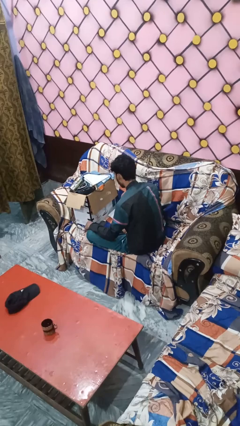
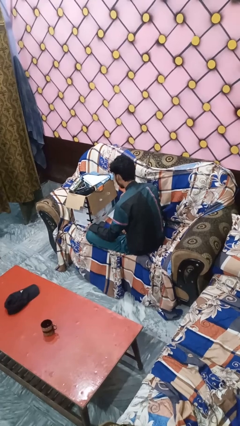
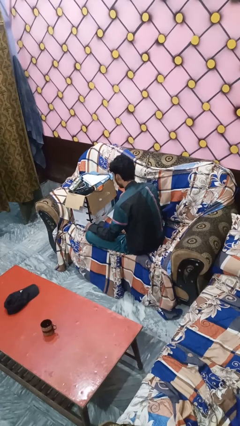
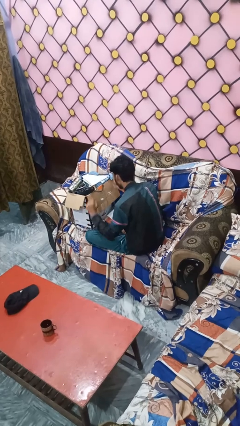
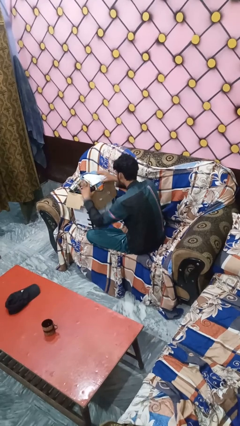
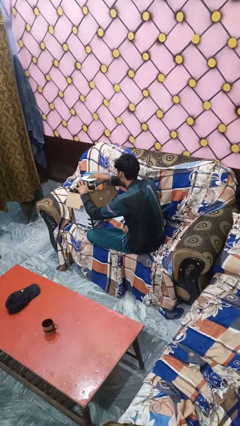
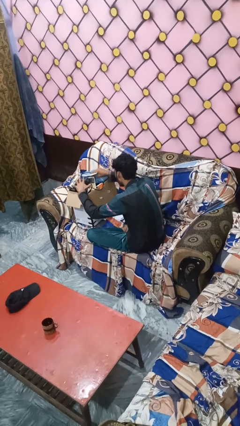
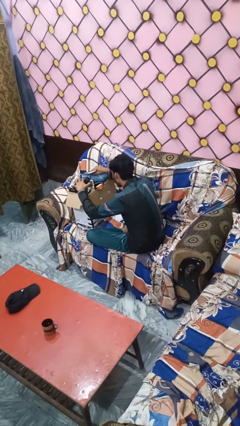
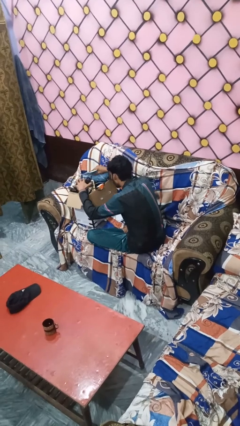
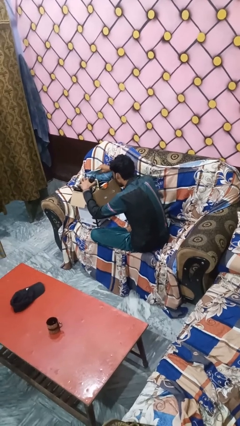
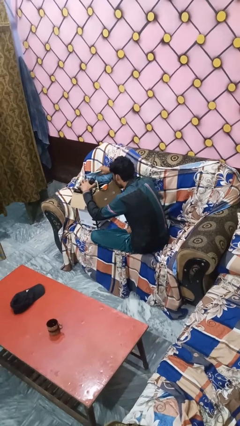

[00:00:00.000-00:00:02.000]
person searches in box

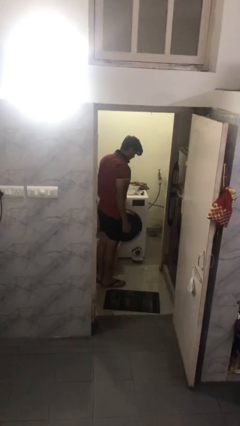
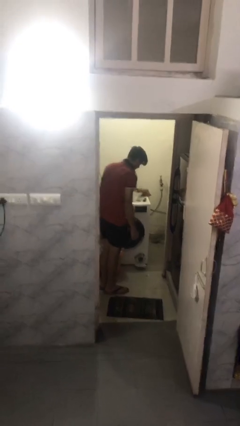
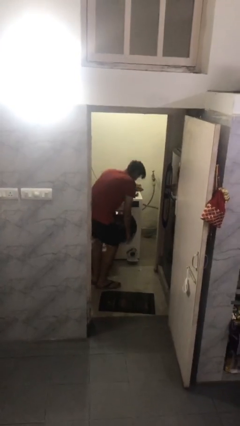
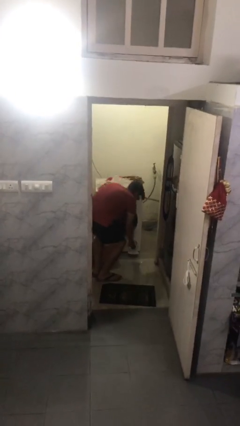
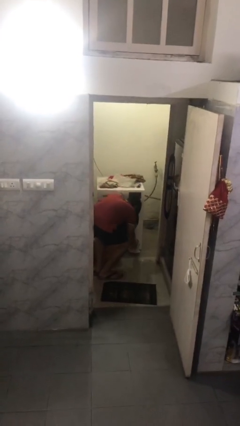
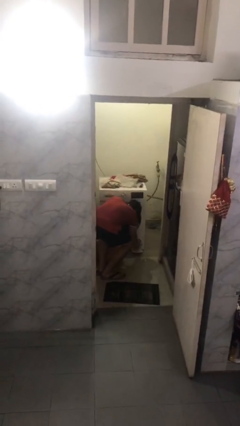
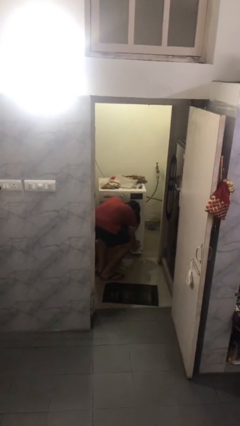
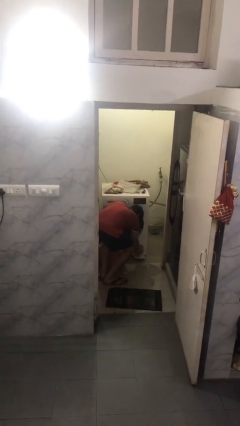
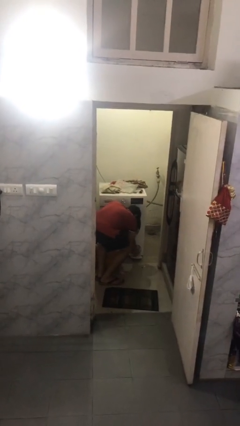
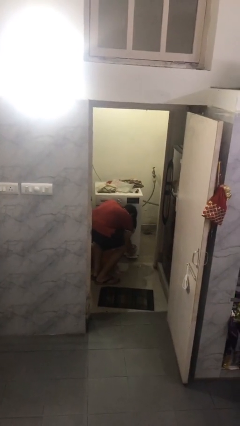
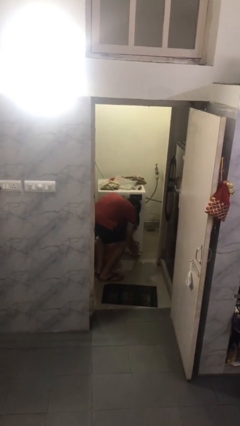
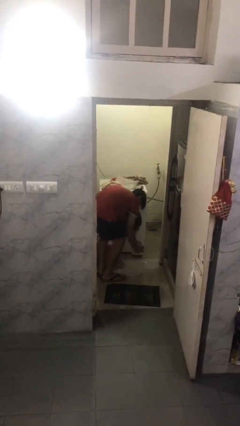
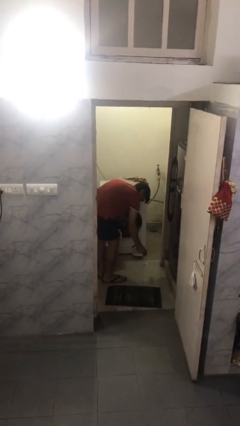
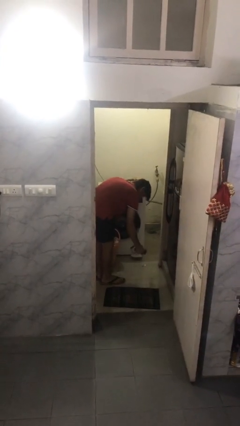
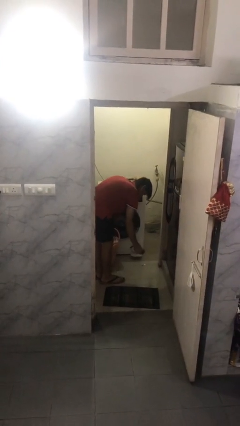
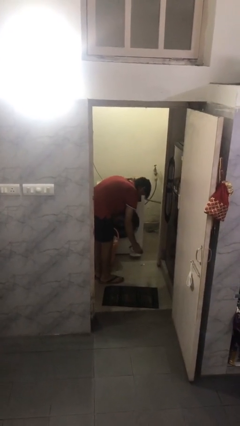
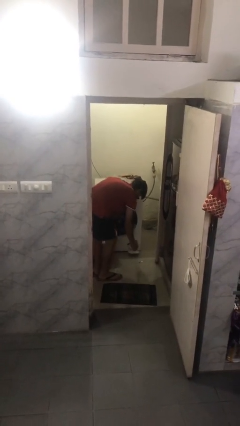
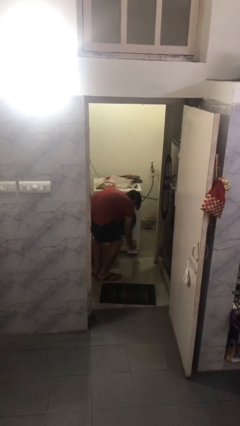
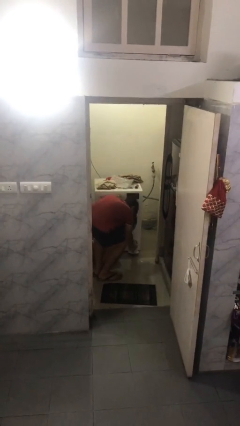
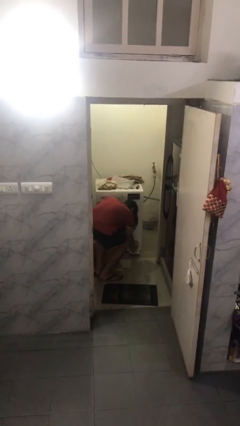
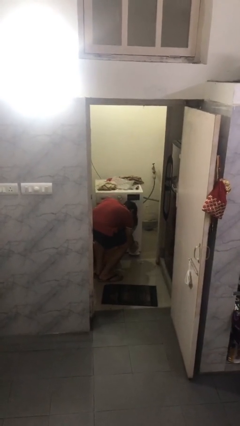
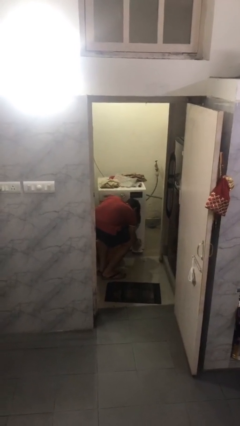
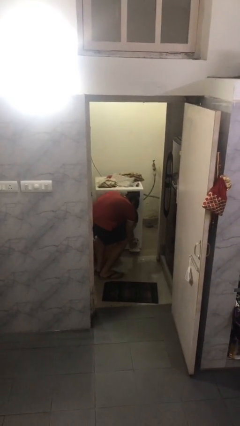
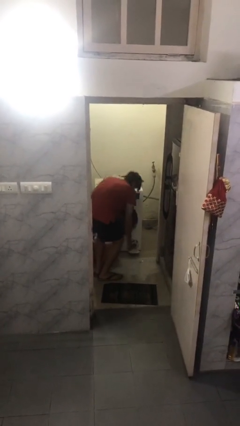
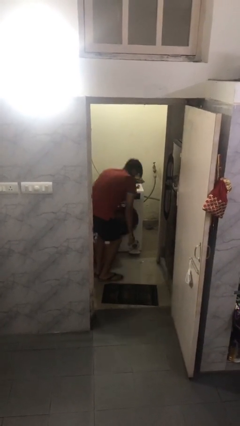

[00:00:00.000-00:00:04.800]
person cleans dryer lint trap

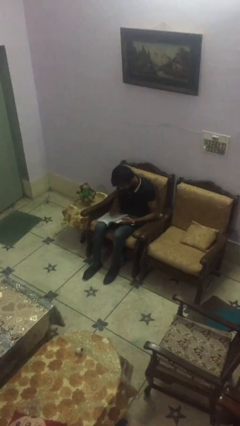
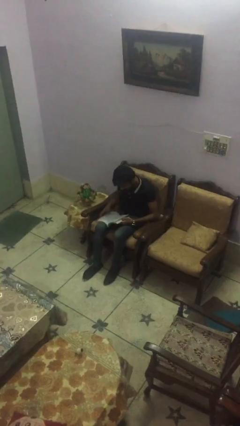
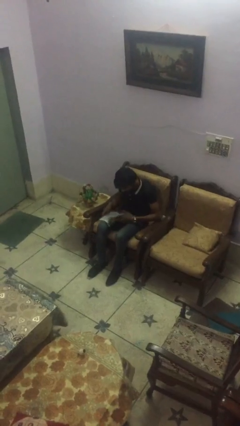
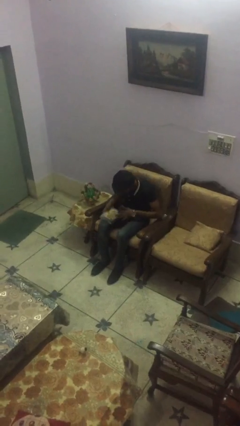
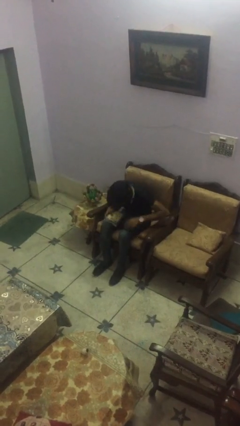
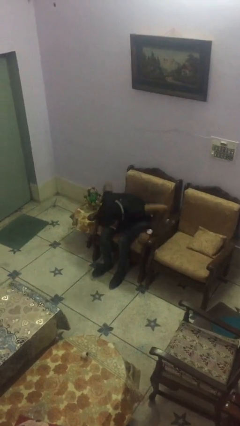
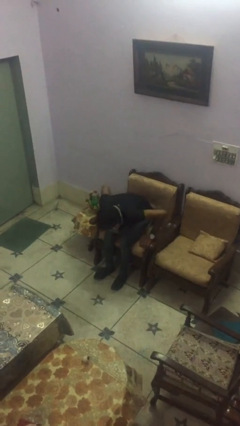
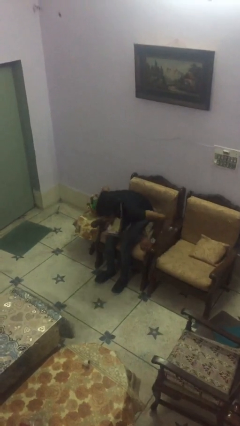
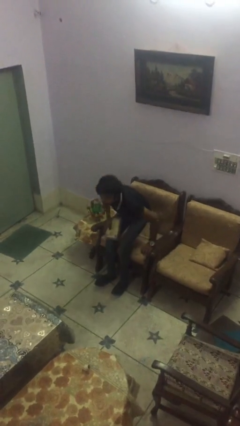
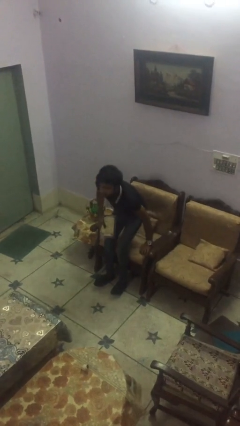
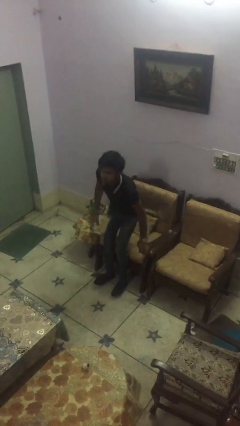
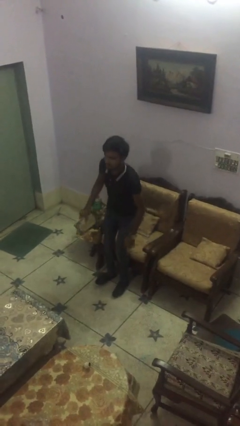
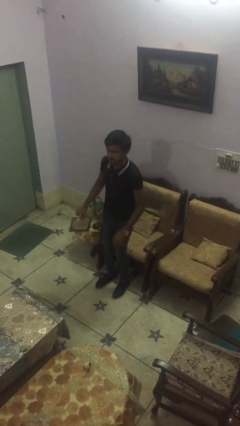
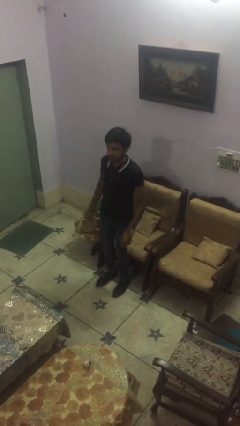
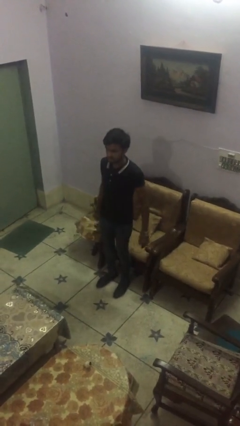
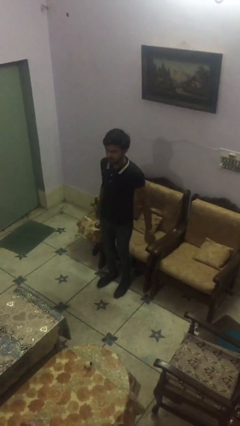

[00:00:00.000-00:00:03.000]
person stands up

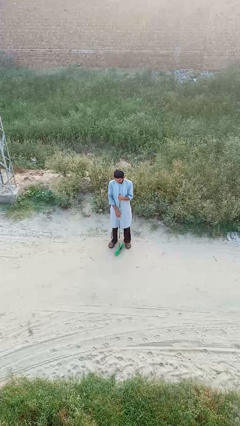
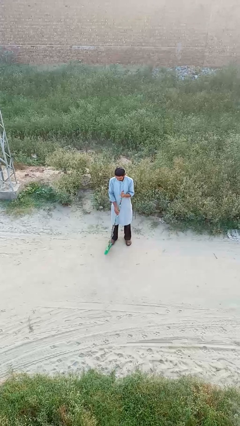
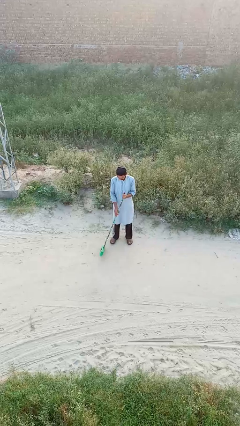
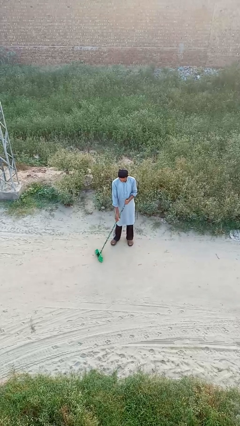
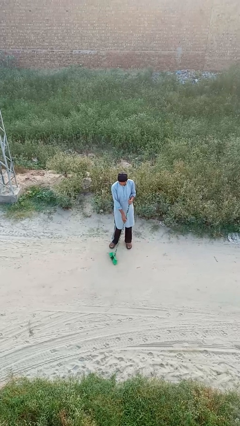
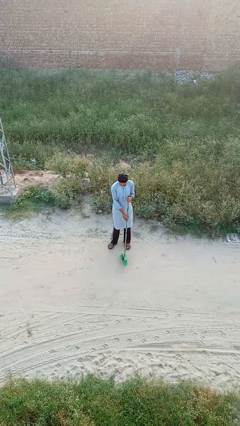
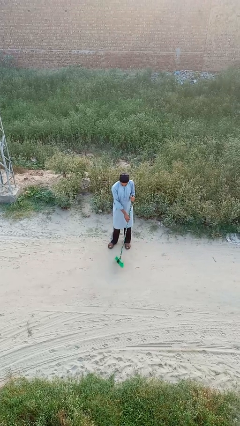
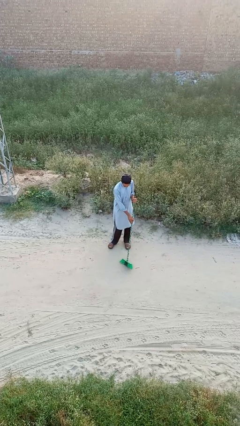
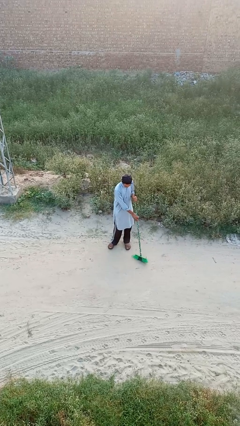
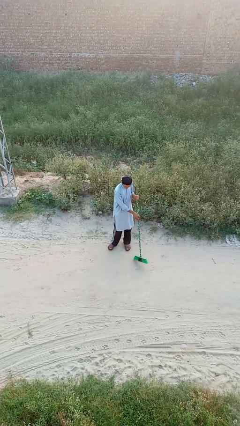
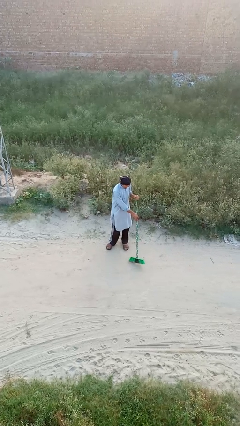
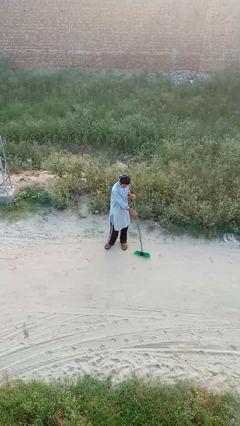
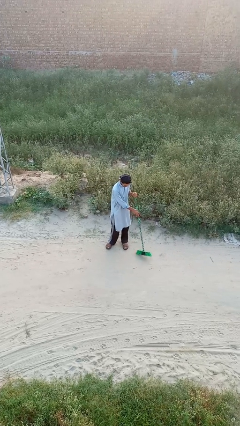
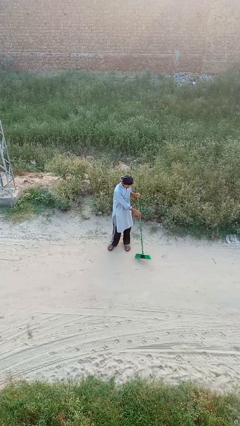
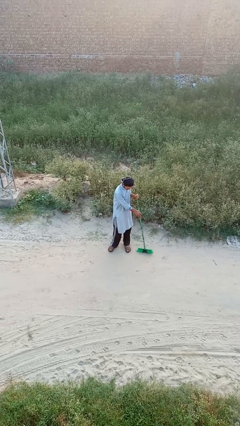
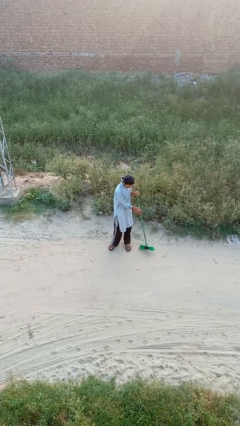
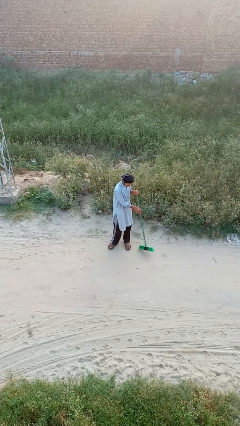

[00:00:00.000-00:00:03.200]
person sweeps floor

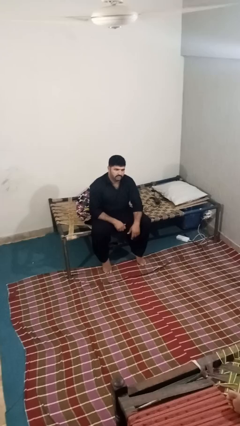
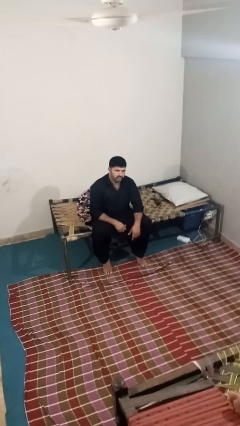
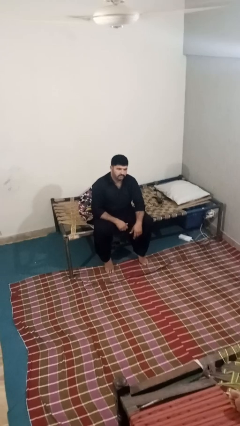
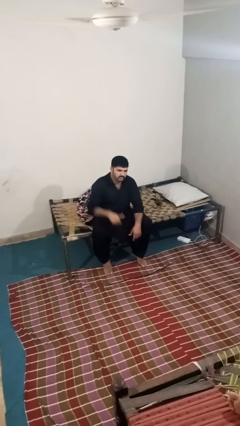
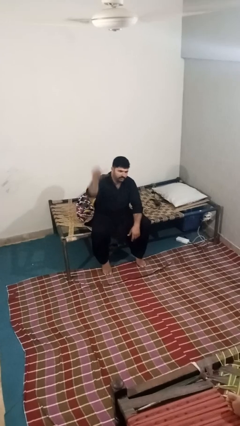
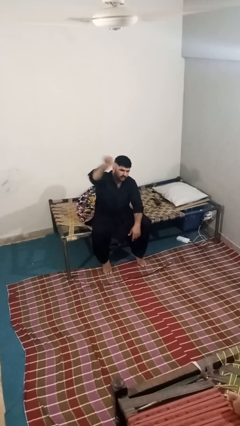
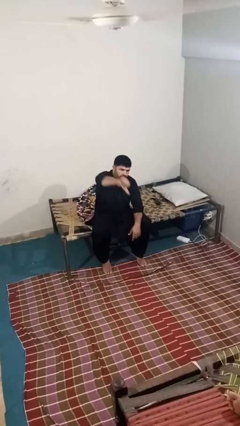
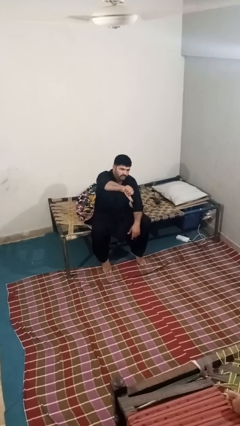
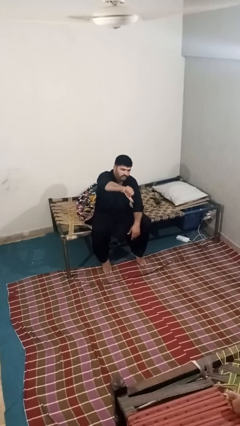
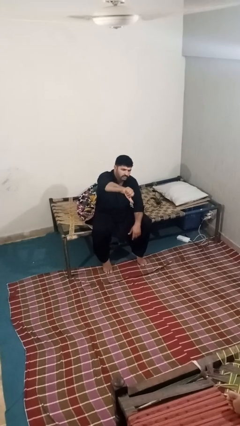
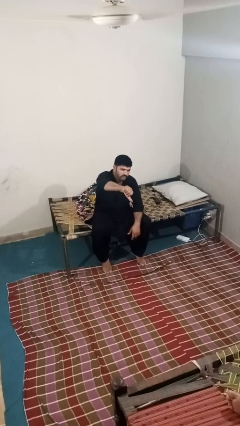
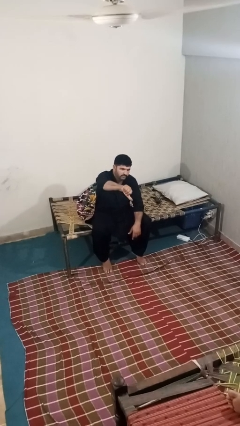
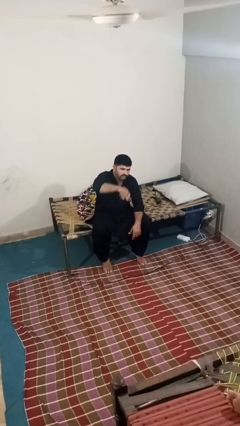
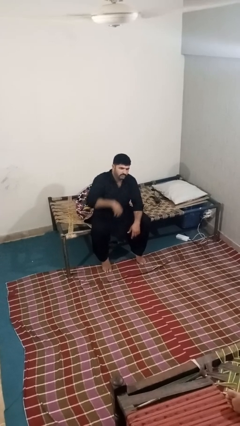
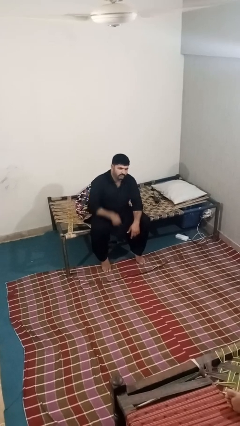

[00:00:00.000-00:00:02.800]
person gestures thumbs down

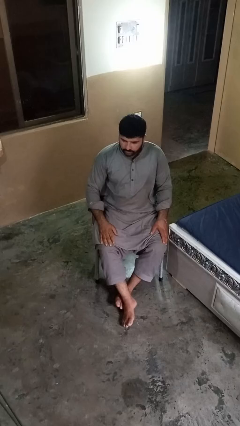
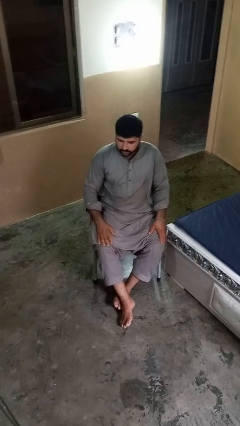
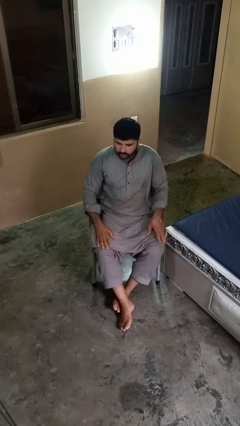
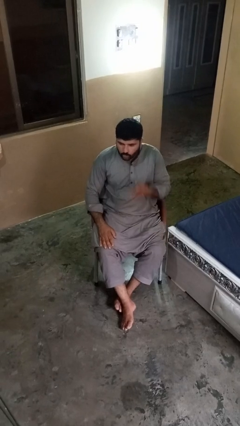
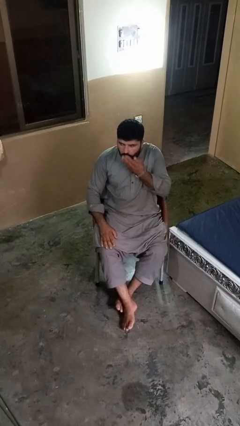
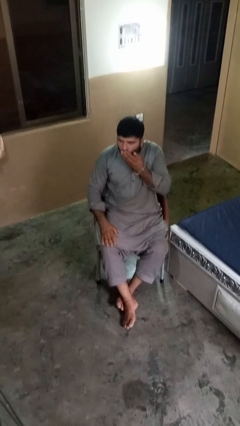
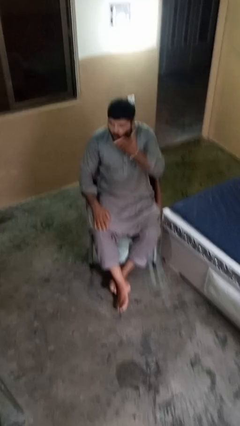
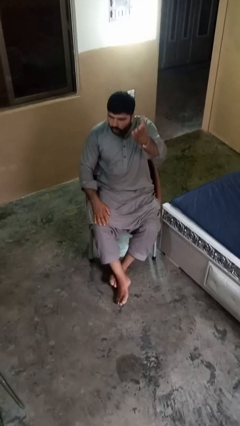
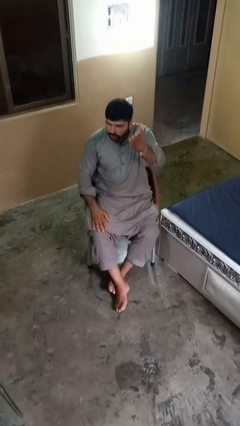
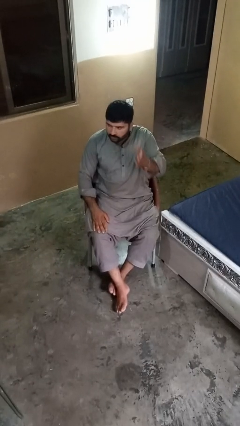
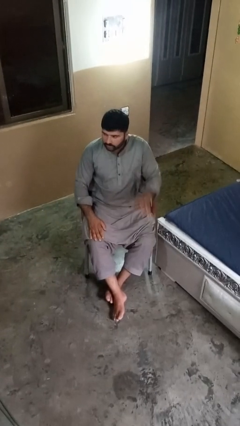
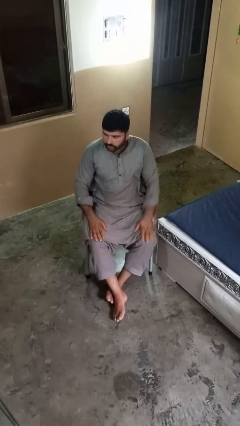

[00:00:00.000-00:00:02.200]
person gestures blow kiss
